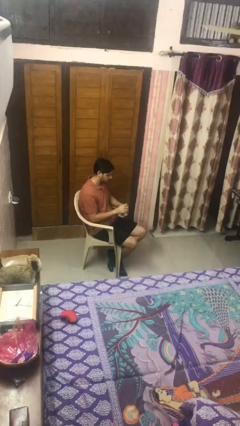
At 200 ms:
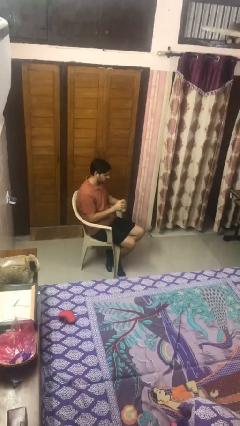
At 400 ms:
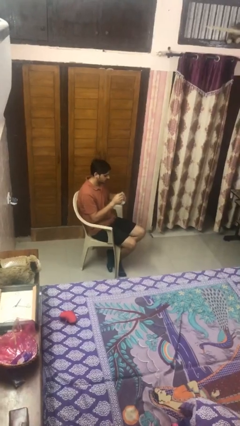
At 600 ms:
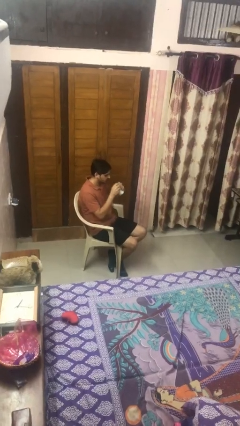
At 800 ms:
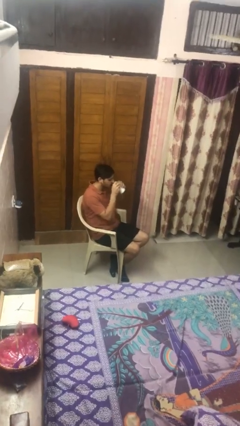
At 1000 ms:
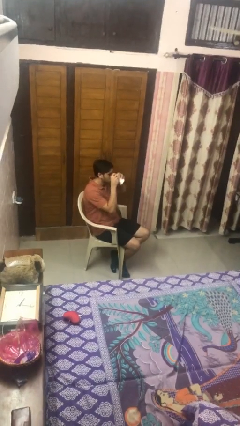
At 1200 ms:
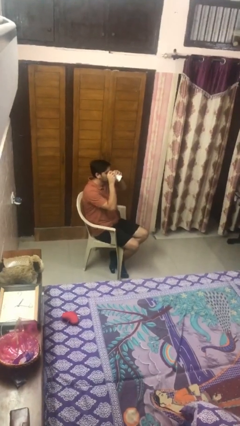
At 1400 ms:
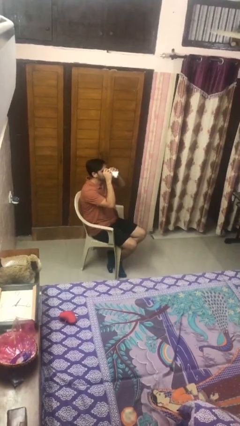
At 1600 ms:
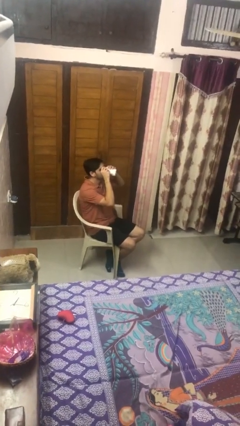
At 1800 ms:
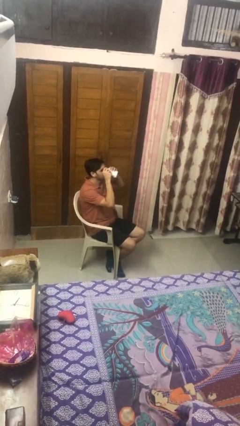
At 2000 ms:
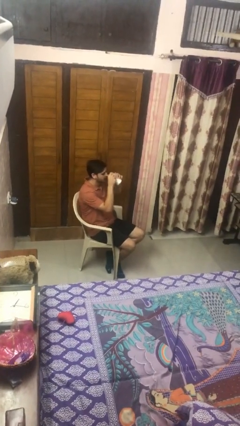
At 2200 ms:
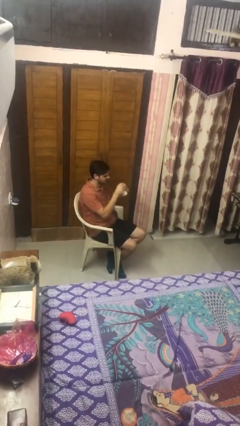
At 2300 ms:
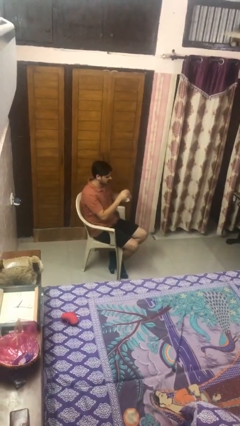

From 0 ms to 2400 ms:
person drinks from mug

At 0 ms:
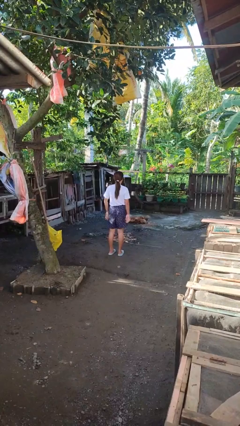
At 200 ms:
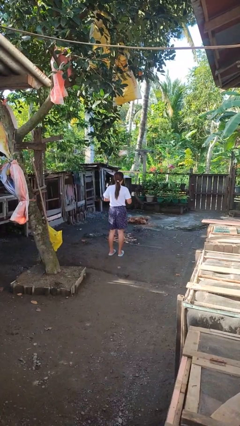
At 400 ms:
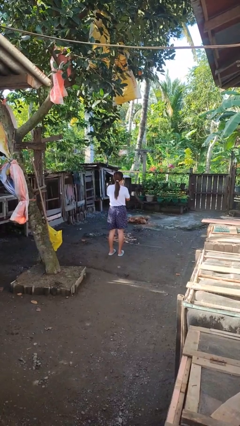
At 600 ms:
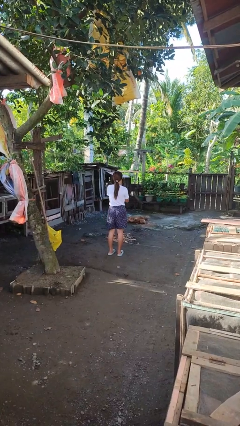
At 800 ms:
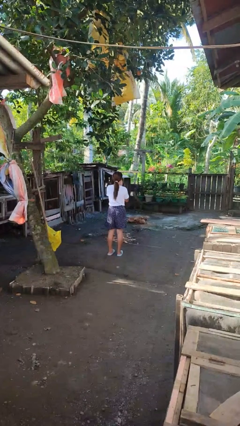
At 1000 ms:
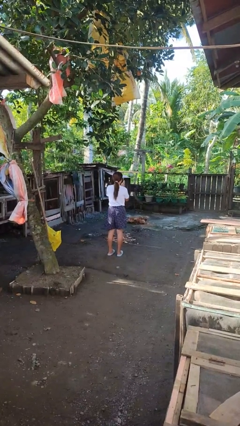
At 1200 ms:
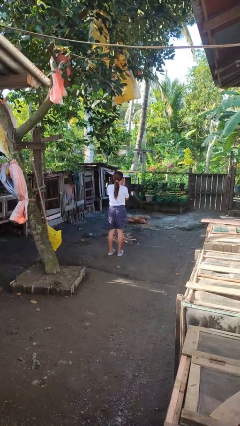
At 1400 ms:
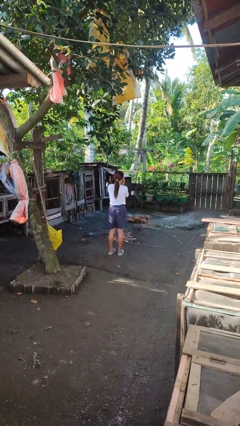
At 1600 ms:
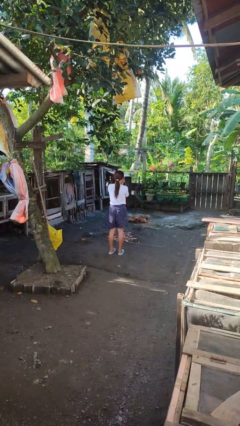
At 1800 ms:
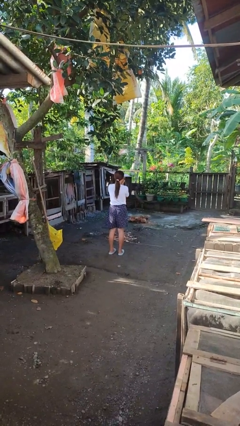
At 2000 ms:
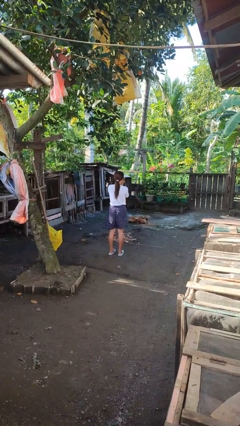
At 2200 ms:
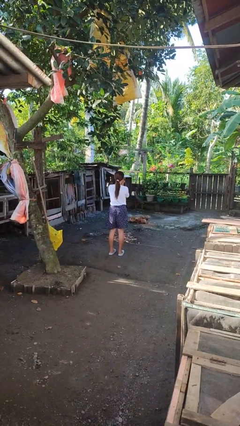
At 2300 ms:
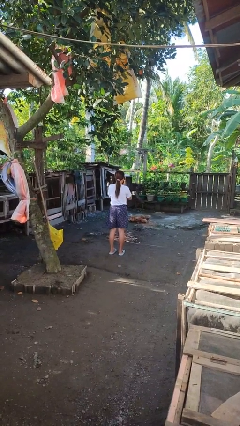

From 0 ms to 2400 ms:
person blows into hands

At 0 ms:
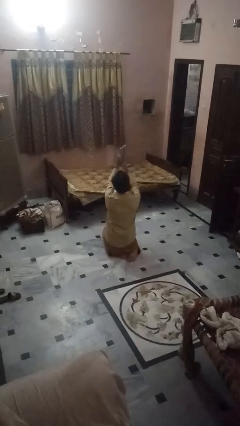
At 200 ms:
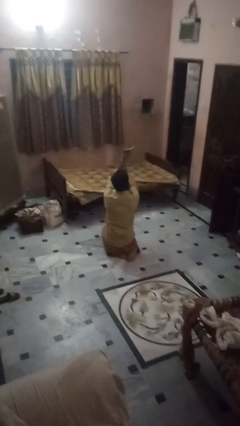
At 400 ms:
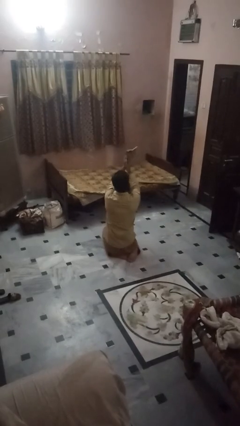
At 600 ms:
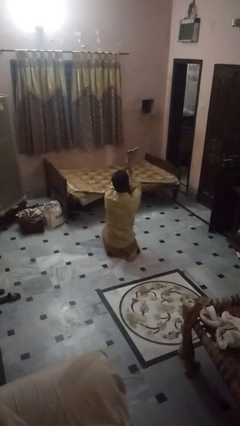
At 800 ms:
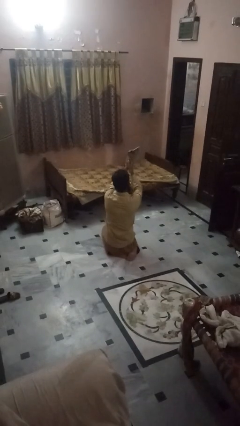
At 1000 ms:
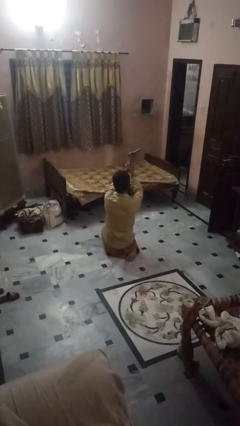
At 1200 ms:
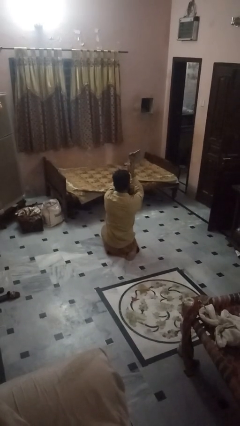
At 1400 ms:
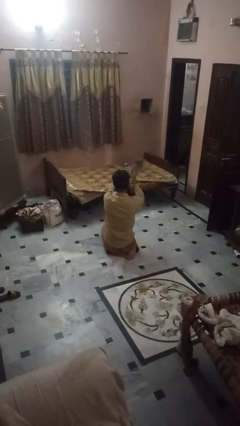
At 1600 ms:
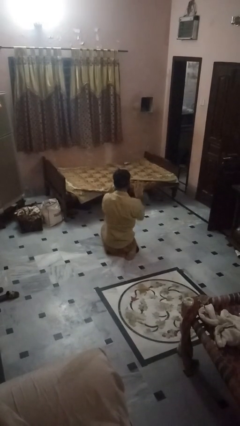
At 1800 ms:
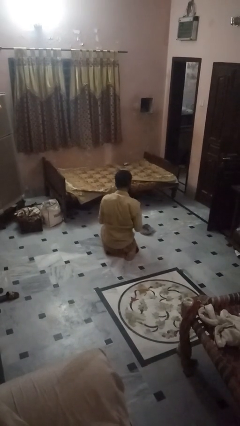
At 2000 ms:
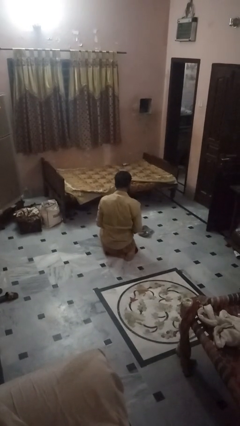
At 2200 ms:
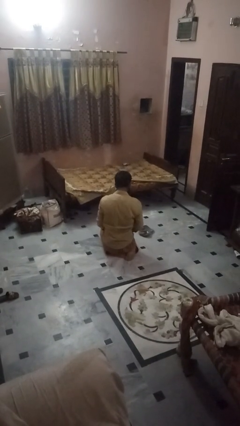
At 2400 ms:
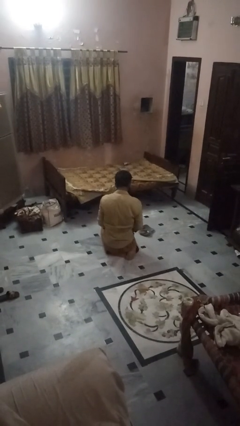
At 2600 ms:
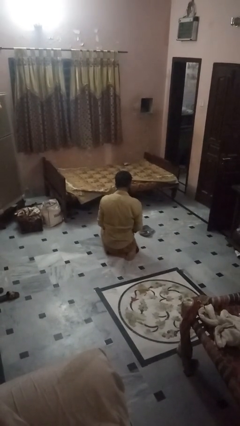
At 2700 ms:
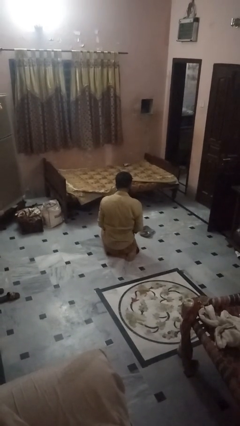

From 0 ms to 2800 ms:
person catches dropped object

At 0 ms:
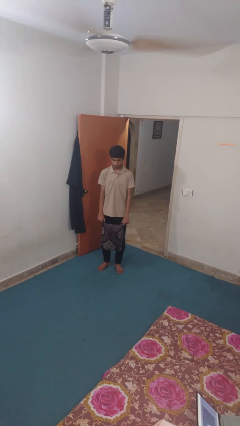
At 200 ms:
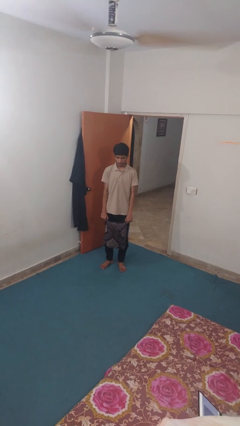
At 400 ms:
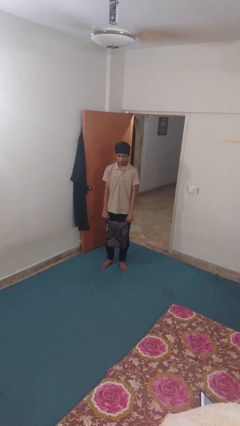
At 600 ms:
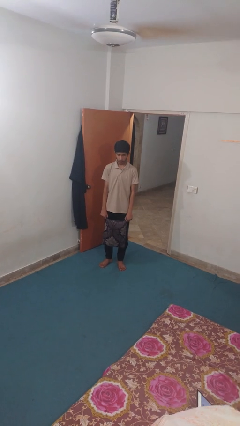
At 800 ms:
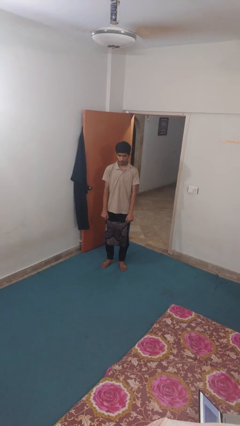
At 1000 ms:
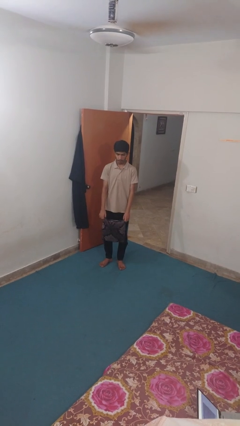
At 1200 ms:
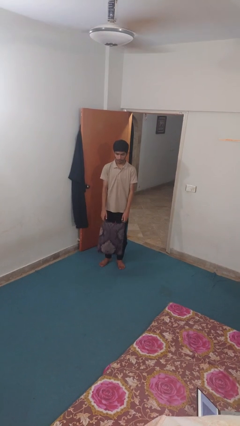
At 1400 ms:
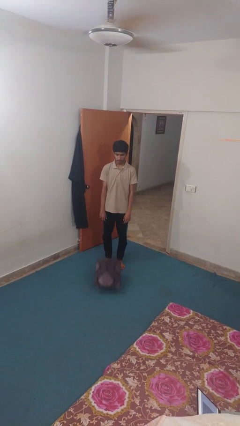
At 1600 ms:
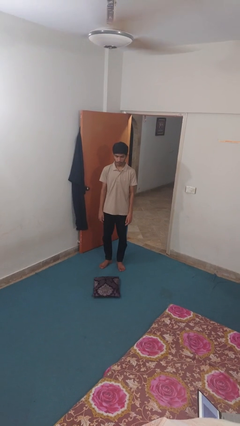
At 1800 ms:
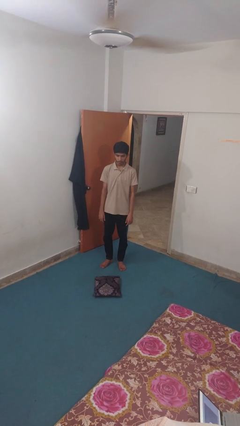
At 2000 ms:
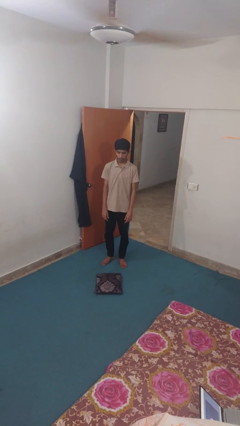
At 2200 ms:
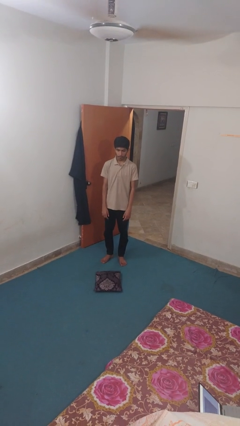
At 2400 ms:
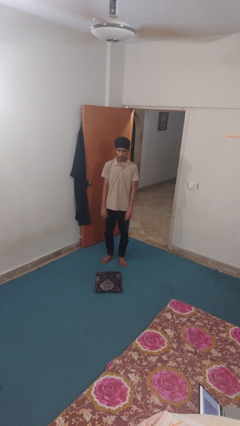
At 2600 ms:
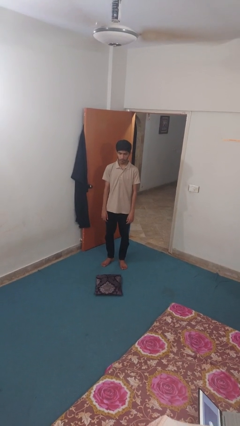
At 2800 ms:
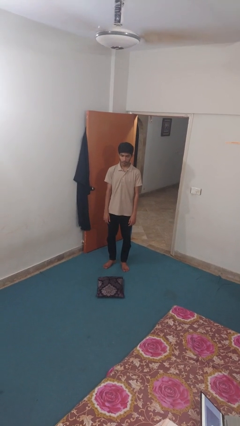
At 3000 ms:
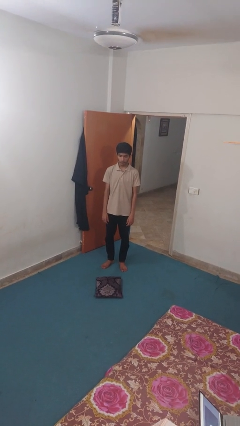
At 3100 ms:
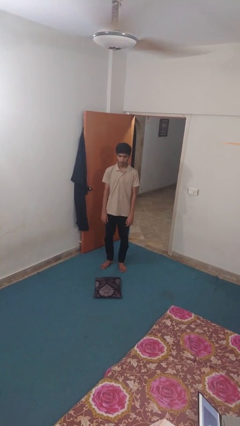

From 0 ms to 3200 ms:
person drops object

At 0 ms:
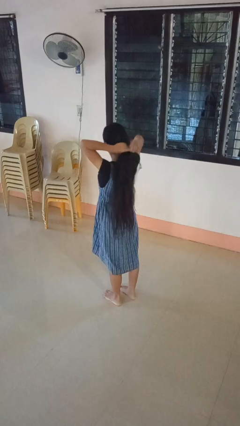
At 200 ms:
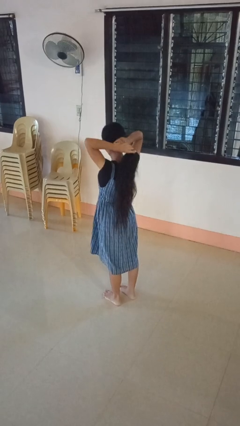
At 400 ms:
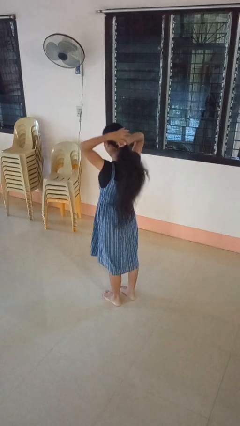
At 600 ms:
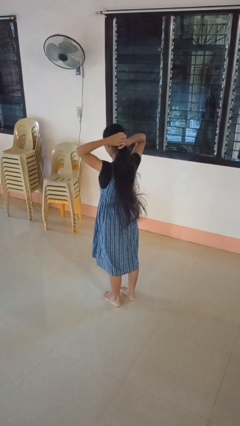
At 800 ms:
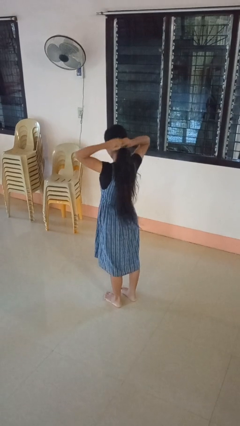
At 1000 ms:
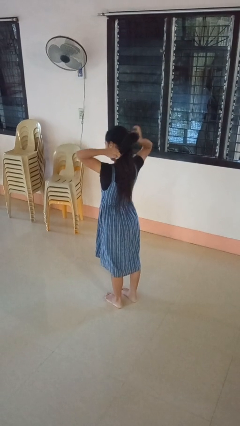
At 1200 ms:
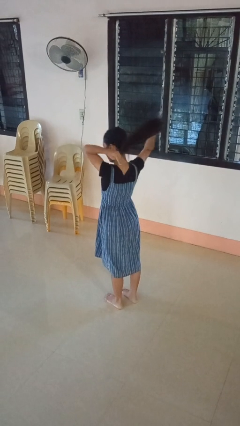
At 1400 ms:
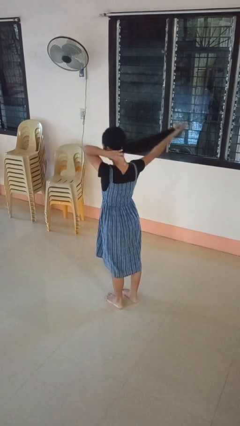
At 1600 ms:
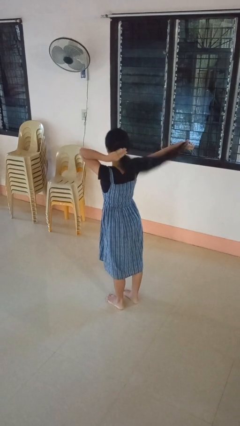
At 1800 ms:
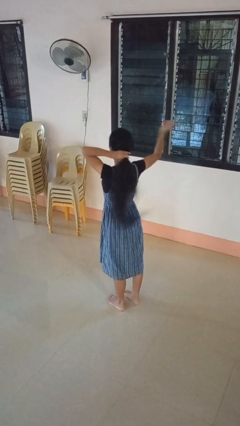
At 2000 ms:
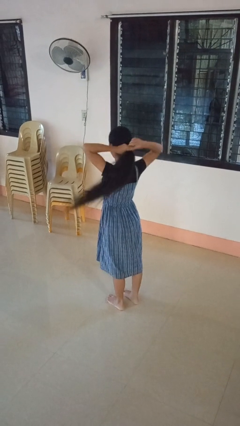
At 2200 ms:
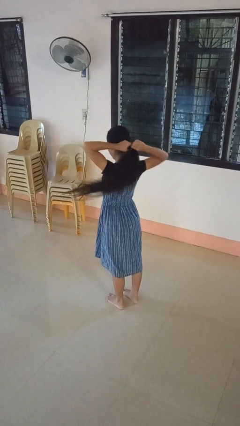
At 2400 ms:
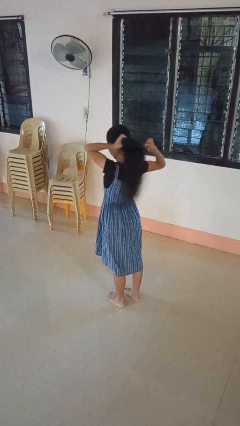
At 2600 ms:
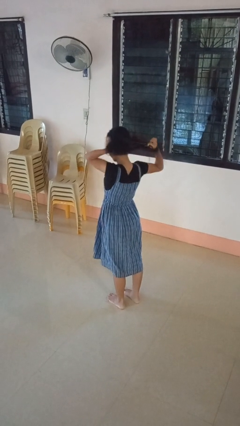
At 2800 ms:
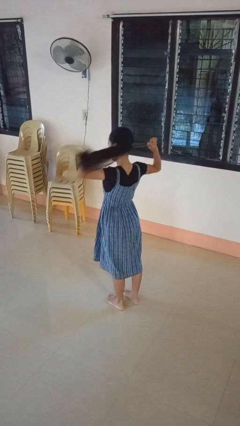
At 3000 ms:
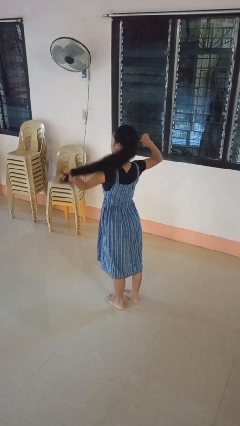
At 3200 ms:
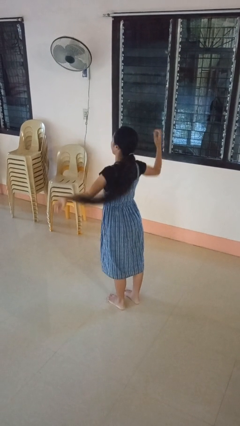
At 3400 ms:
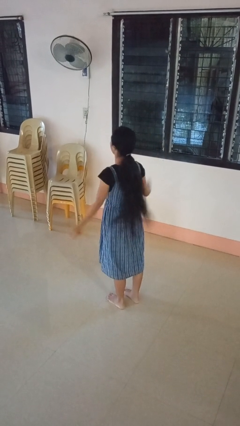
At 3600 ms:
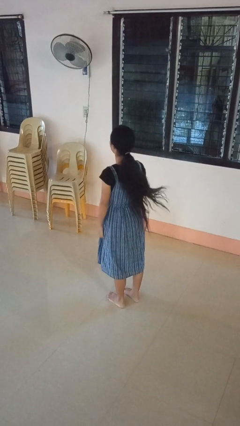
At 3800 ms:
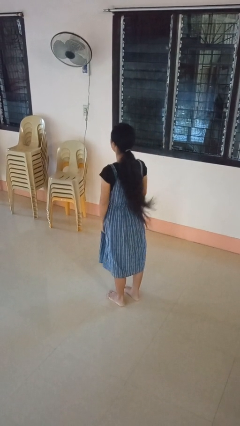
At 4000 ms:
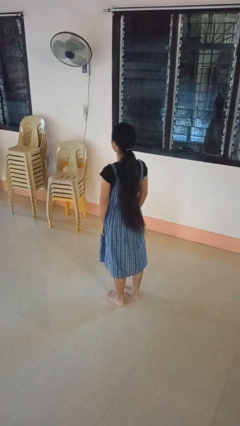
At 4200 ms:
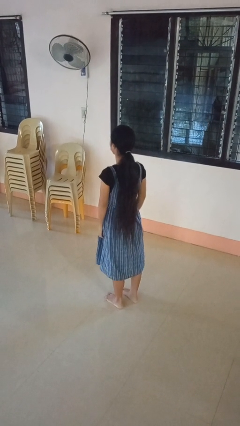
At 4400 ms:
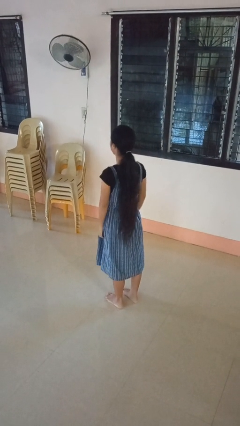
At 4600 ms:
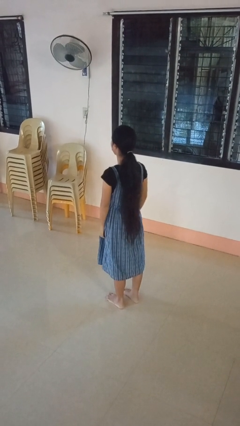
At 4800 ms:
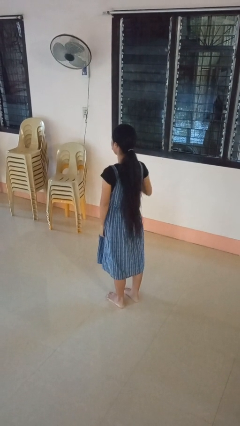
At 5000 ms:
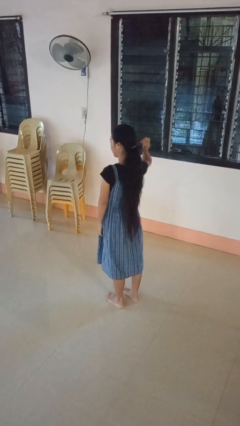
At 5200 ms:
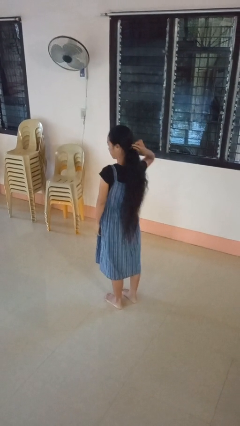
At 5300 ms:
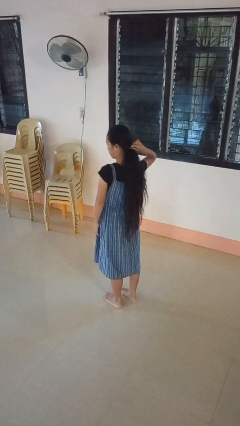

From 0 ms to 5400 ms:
person puts hair in ponytail

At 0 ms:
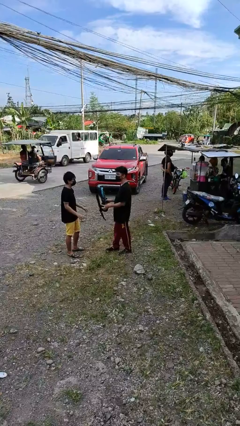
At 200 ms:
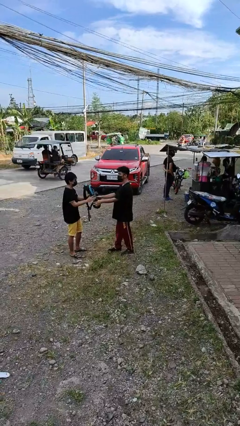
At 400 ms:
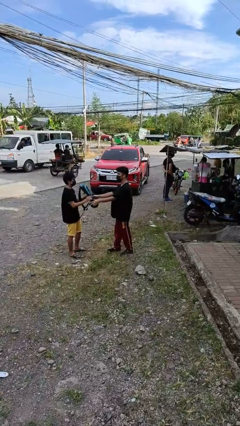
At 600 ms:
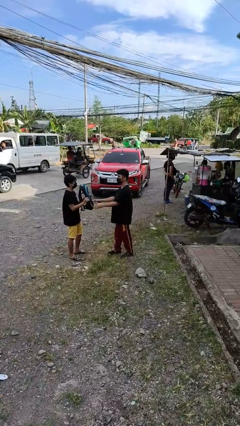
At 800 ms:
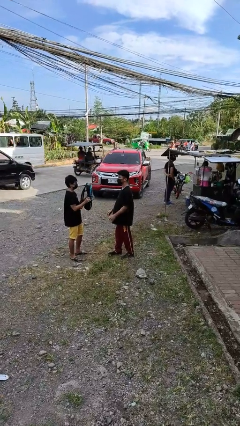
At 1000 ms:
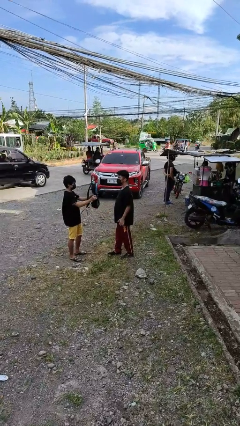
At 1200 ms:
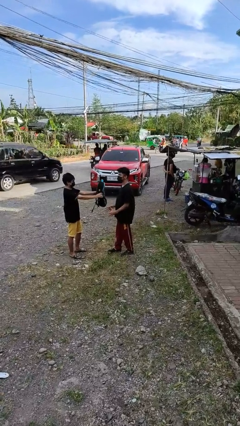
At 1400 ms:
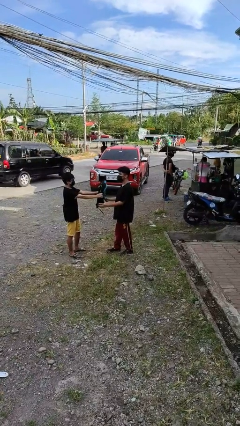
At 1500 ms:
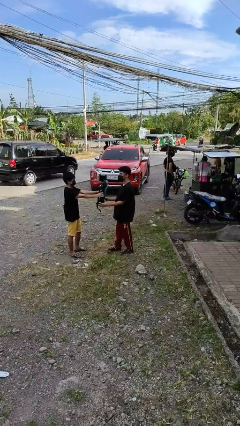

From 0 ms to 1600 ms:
person transfers object to person
